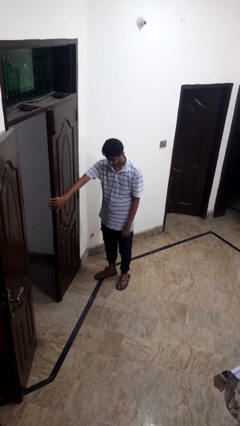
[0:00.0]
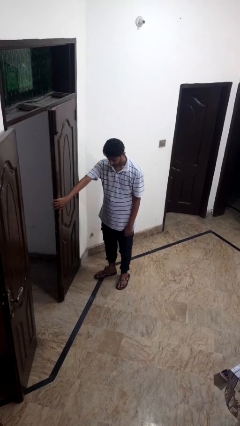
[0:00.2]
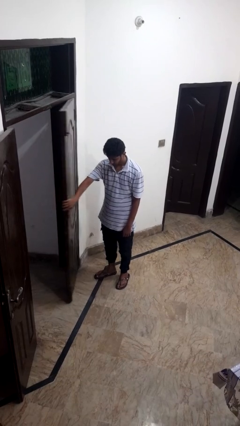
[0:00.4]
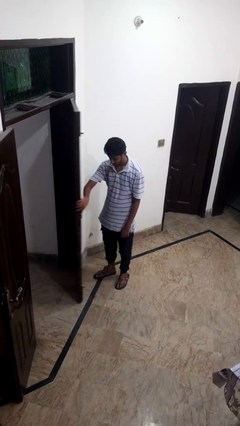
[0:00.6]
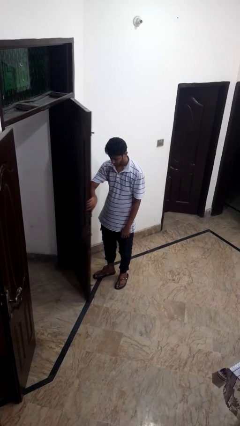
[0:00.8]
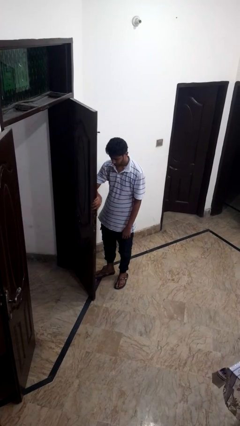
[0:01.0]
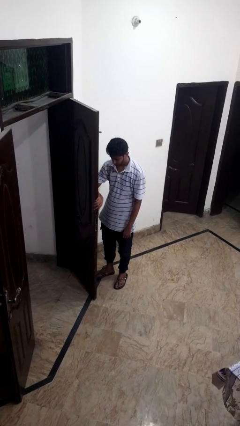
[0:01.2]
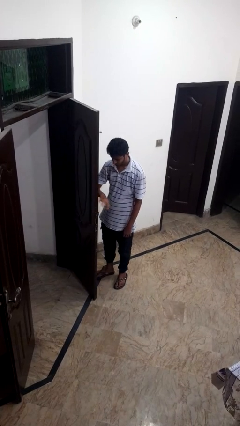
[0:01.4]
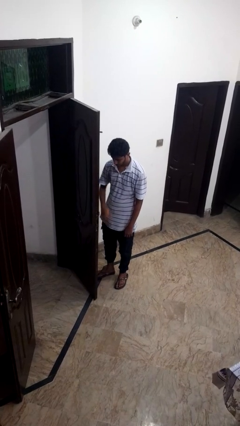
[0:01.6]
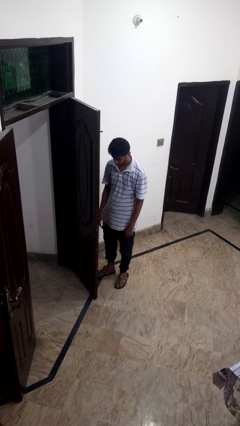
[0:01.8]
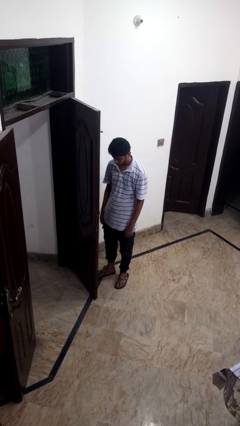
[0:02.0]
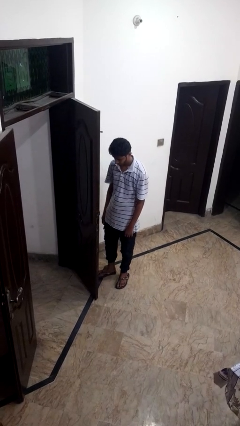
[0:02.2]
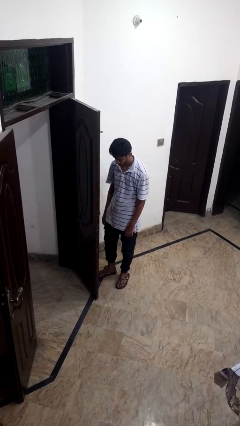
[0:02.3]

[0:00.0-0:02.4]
person opens facility door

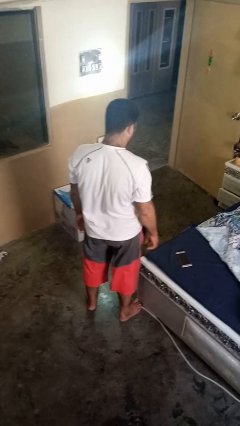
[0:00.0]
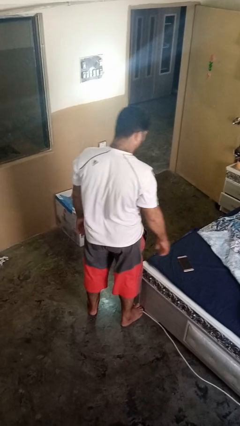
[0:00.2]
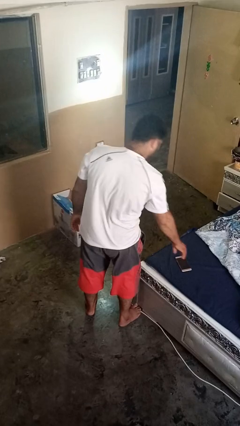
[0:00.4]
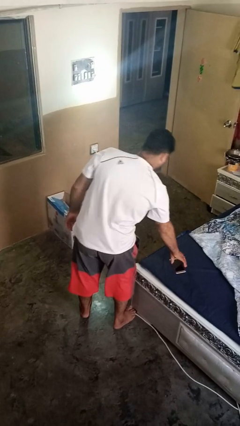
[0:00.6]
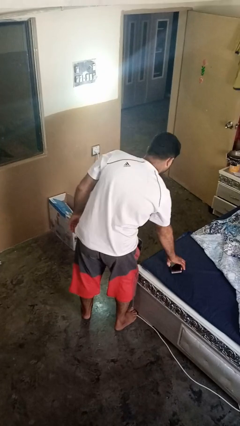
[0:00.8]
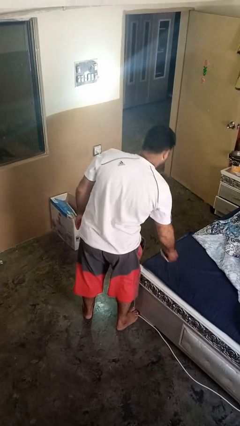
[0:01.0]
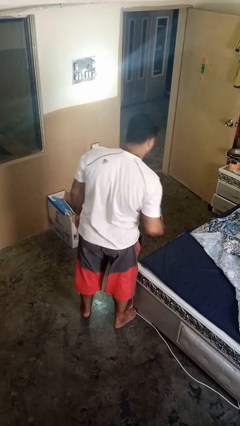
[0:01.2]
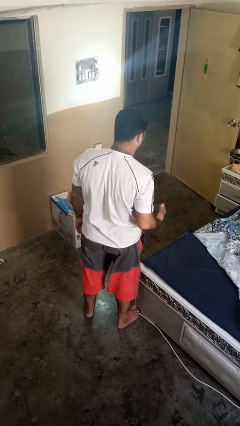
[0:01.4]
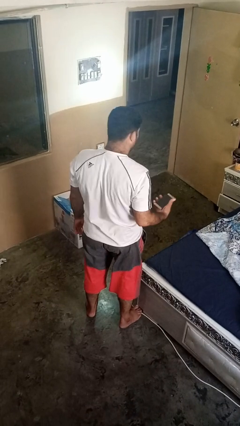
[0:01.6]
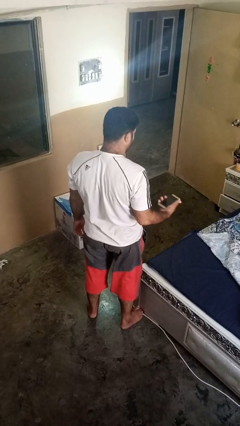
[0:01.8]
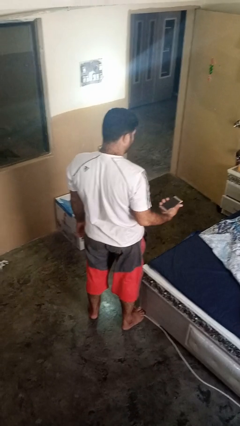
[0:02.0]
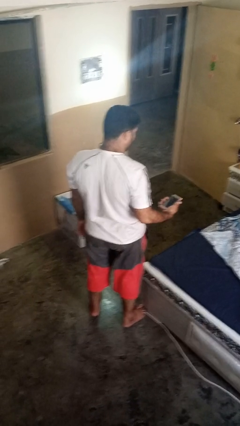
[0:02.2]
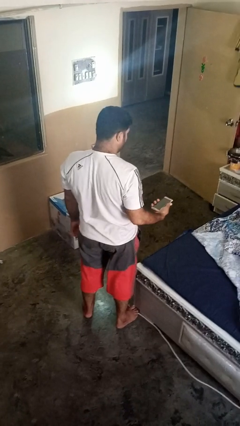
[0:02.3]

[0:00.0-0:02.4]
person takes phone from pocket

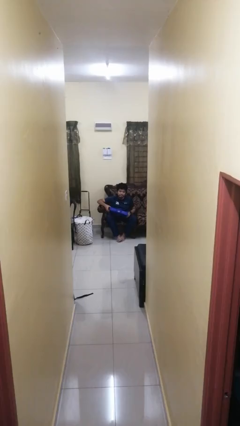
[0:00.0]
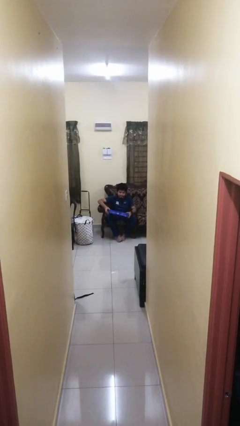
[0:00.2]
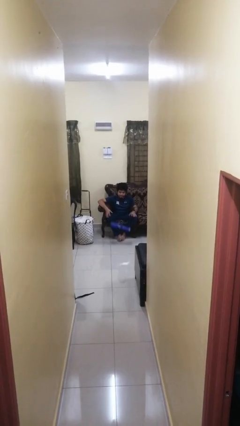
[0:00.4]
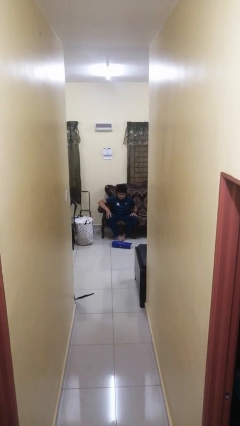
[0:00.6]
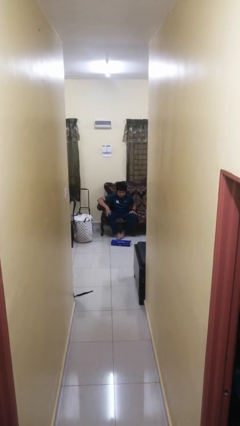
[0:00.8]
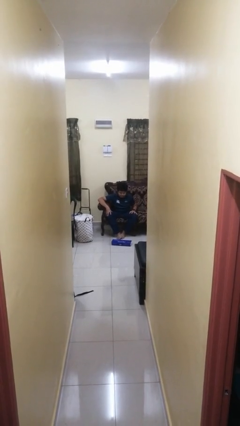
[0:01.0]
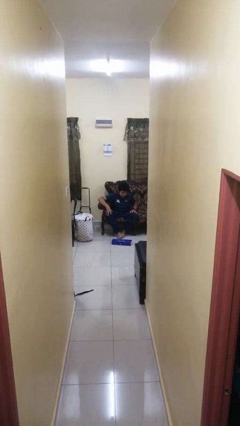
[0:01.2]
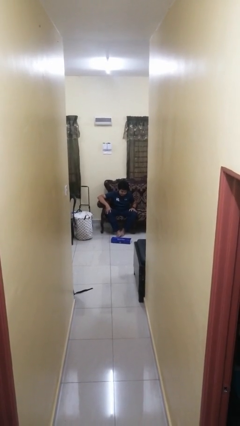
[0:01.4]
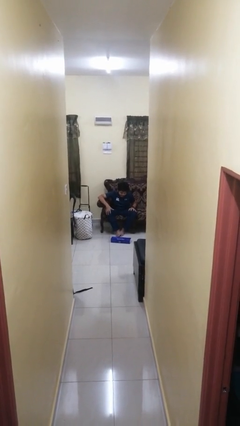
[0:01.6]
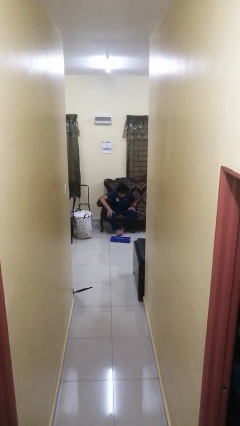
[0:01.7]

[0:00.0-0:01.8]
person drops object

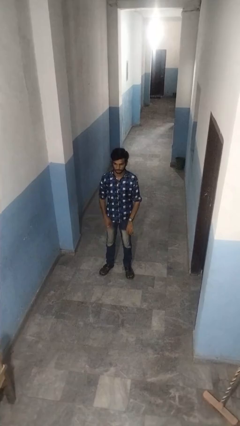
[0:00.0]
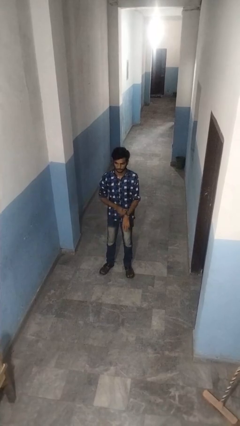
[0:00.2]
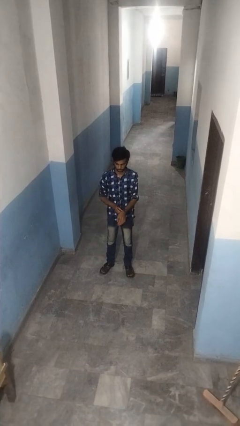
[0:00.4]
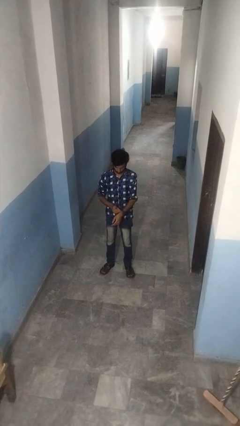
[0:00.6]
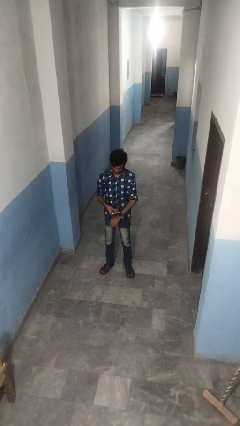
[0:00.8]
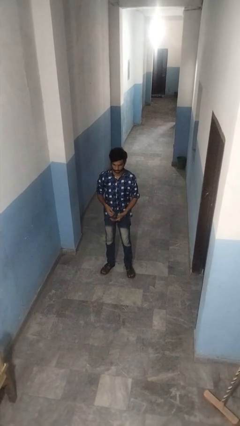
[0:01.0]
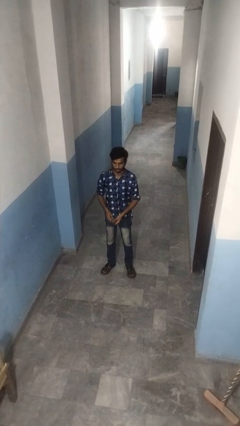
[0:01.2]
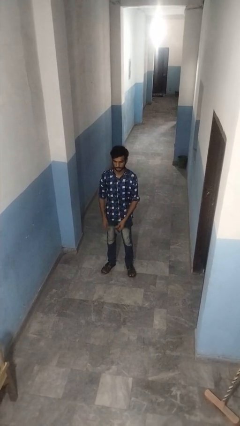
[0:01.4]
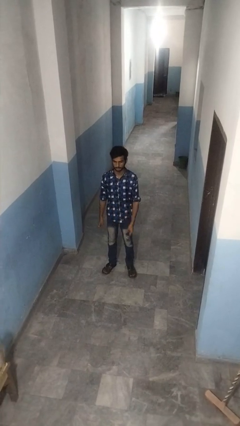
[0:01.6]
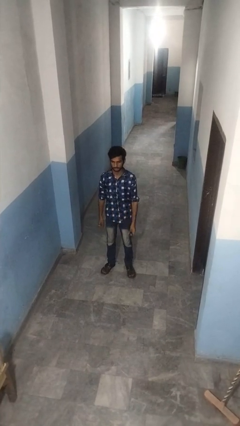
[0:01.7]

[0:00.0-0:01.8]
person takes off wristwatch

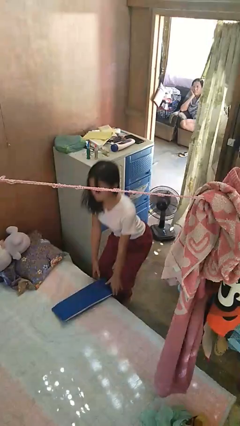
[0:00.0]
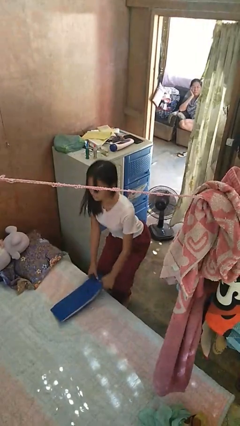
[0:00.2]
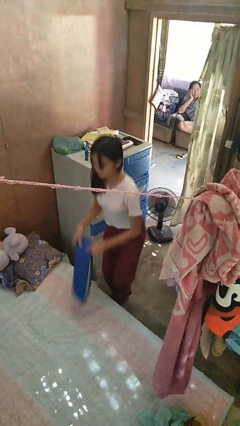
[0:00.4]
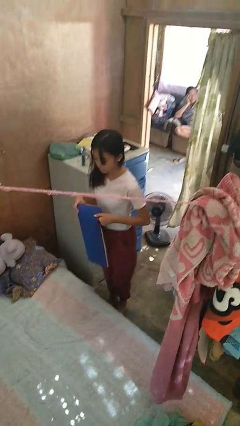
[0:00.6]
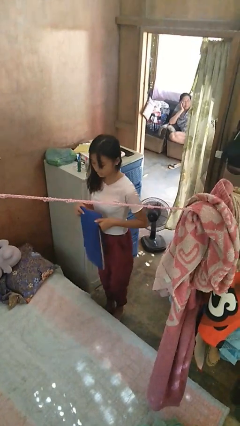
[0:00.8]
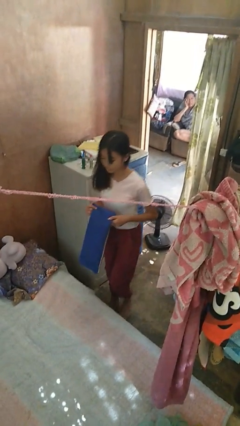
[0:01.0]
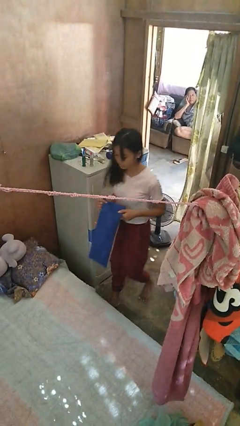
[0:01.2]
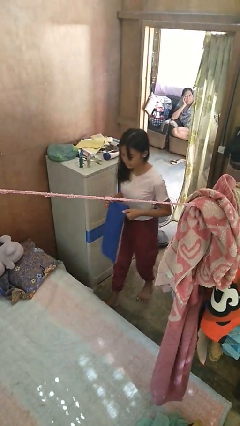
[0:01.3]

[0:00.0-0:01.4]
person picks up object from bed

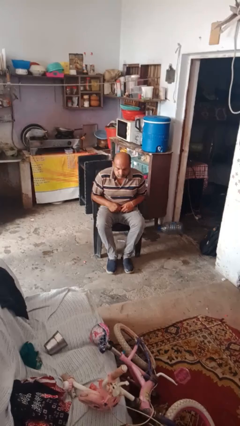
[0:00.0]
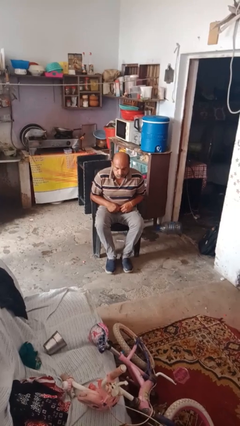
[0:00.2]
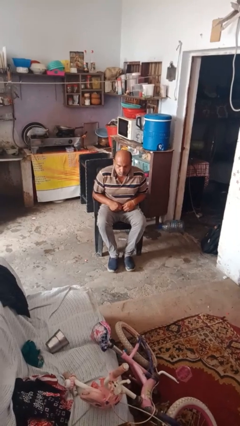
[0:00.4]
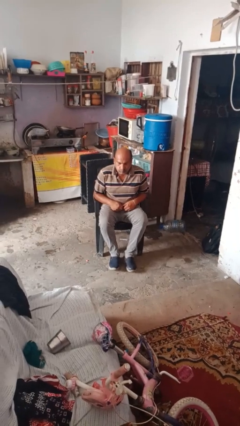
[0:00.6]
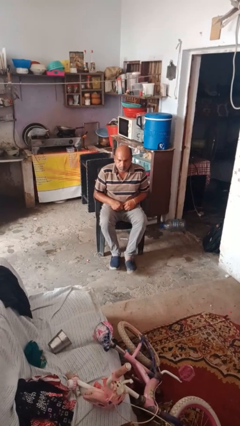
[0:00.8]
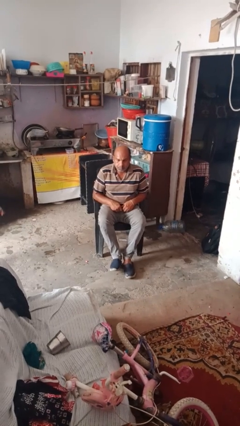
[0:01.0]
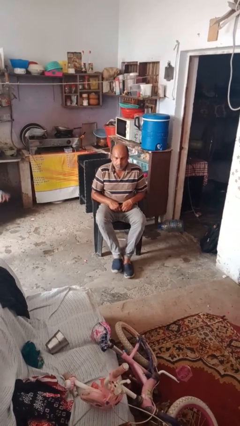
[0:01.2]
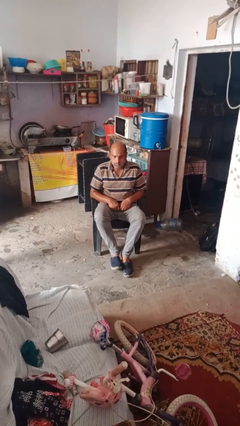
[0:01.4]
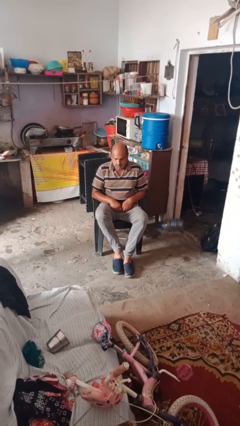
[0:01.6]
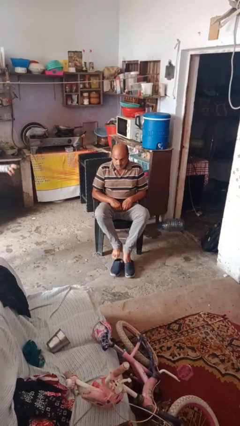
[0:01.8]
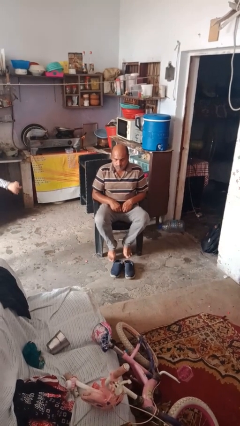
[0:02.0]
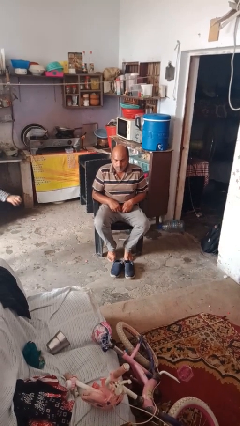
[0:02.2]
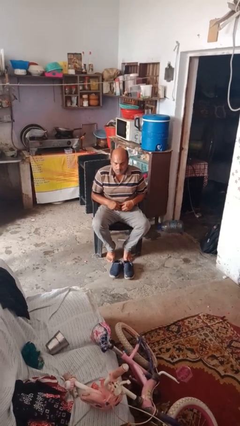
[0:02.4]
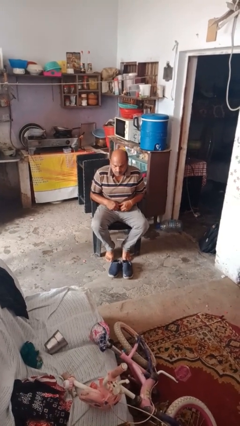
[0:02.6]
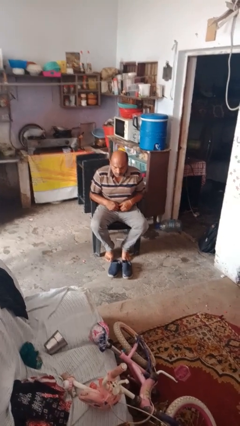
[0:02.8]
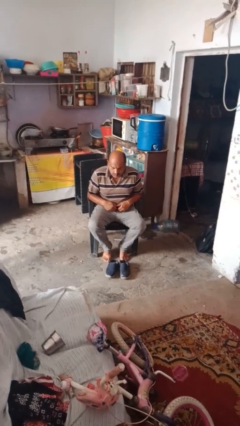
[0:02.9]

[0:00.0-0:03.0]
person takes off shoes

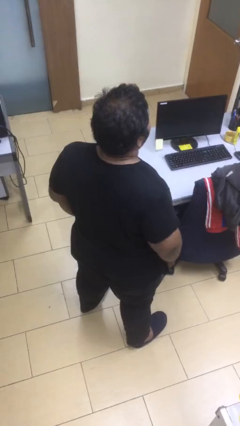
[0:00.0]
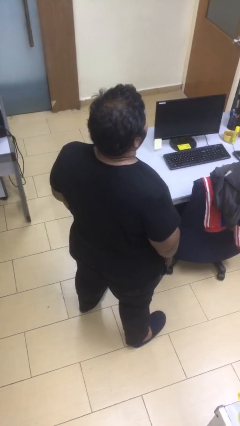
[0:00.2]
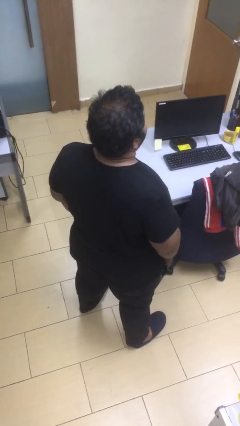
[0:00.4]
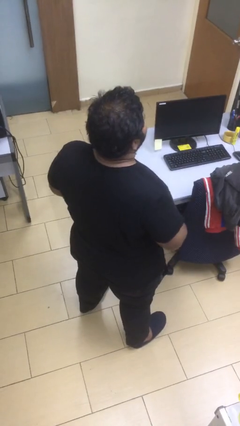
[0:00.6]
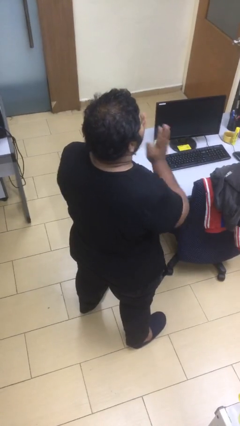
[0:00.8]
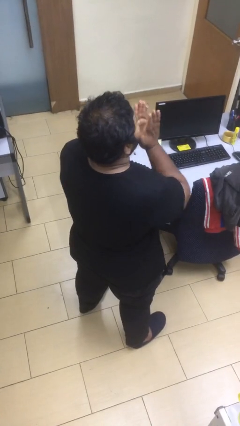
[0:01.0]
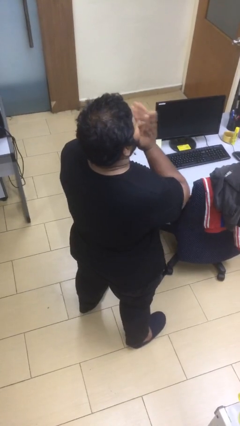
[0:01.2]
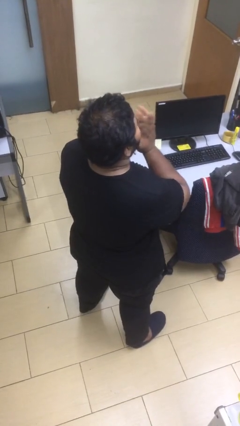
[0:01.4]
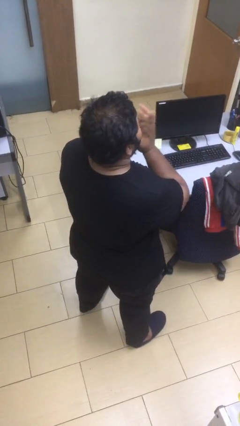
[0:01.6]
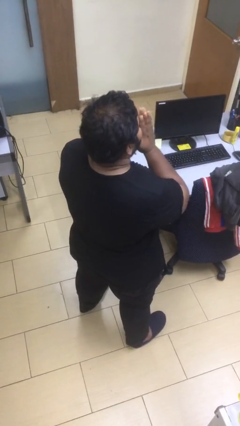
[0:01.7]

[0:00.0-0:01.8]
person claps hands

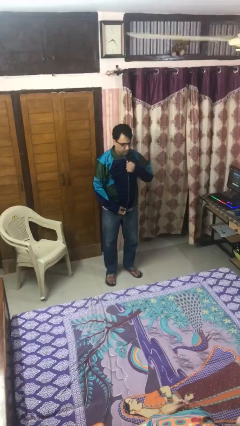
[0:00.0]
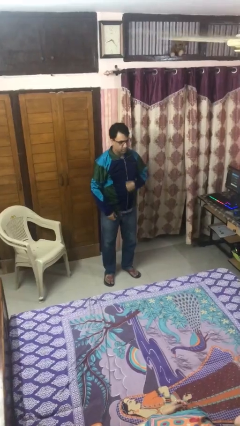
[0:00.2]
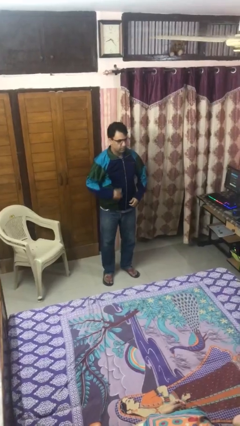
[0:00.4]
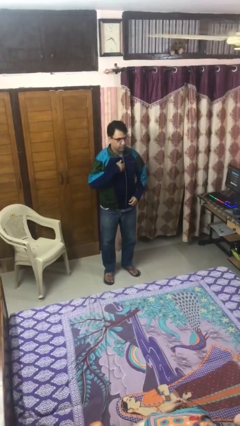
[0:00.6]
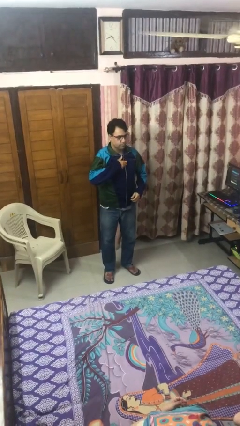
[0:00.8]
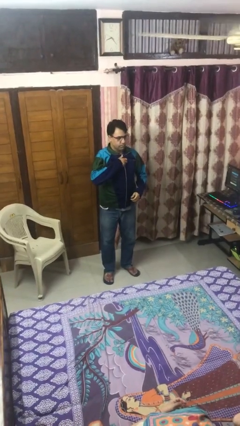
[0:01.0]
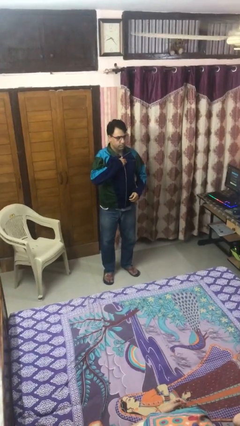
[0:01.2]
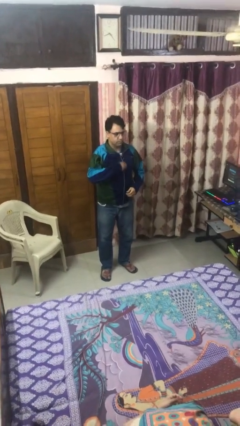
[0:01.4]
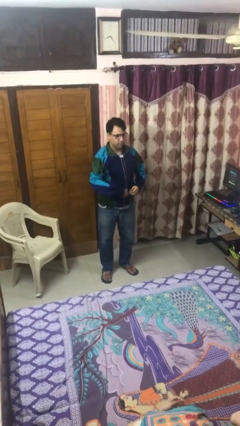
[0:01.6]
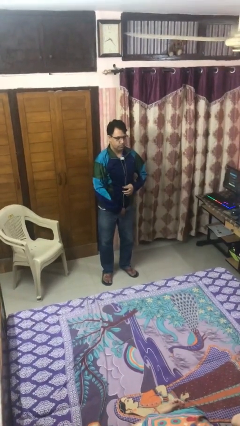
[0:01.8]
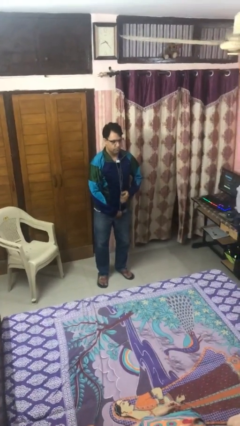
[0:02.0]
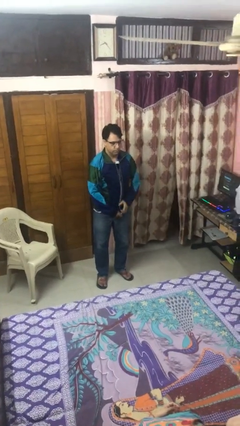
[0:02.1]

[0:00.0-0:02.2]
person unzips jacket
